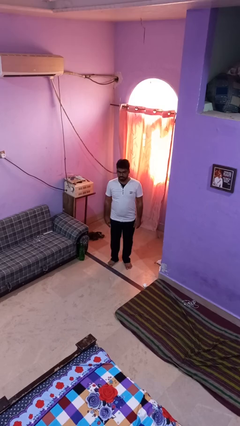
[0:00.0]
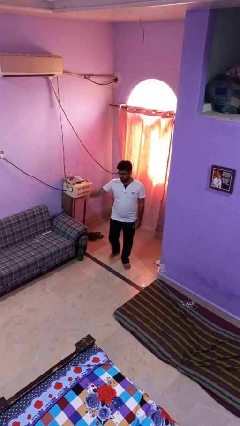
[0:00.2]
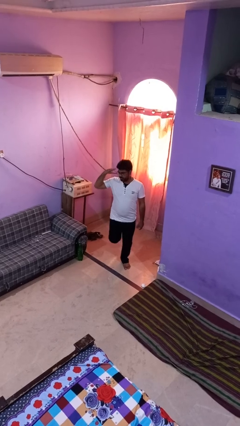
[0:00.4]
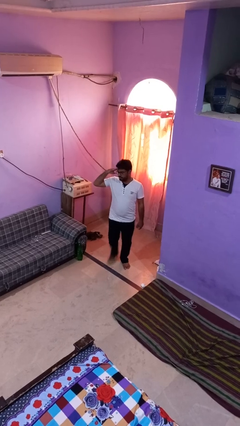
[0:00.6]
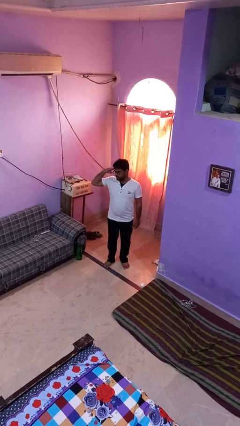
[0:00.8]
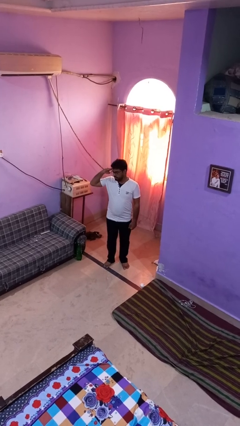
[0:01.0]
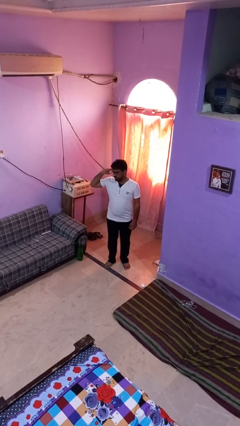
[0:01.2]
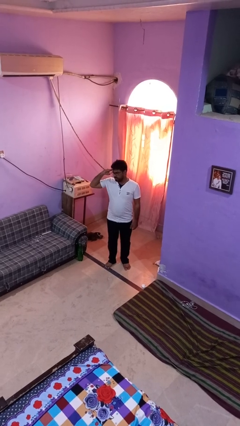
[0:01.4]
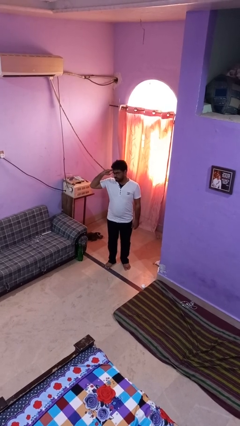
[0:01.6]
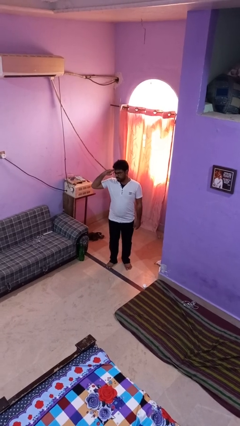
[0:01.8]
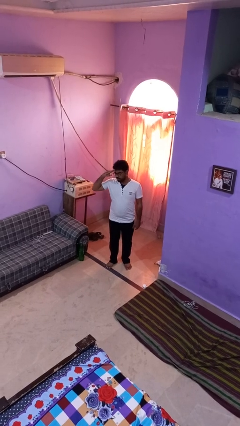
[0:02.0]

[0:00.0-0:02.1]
person salutes

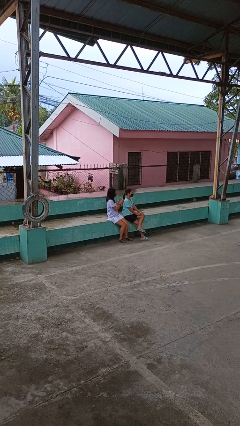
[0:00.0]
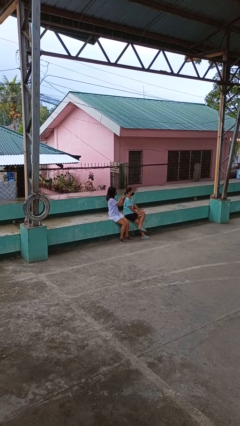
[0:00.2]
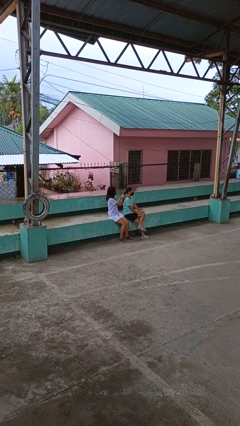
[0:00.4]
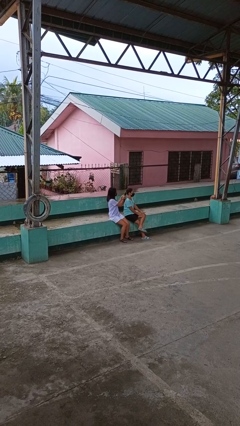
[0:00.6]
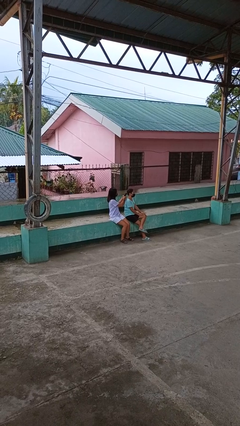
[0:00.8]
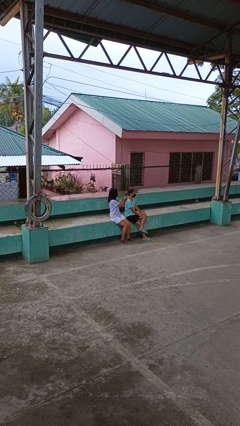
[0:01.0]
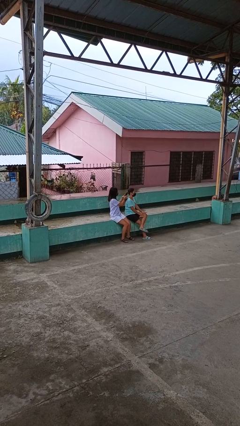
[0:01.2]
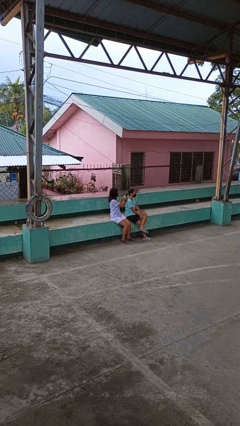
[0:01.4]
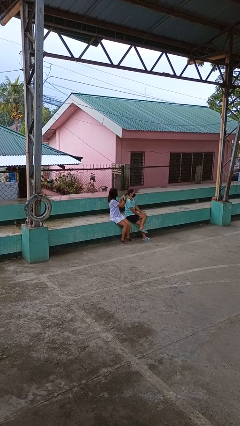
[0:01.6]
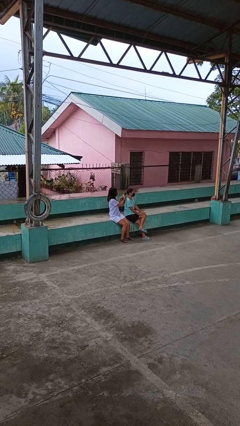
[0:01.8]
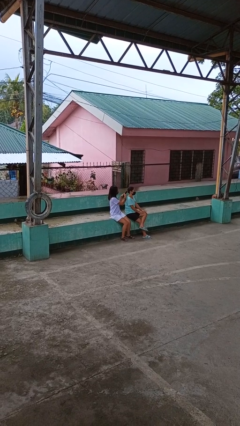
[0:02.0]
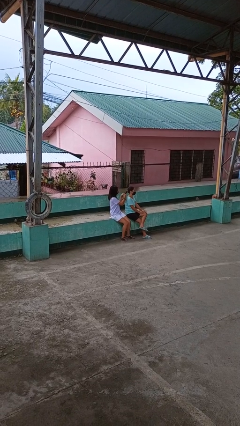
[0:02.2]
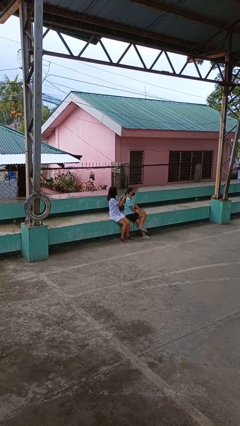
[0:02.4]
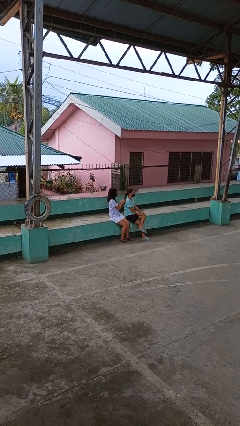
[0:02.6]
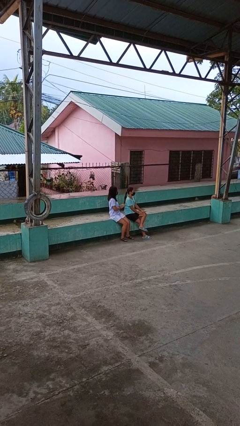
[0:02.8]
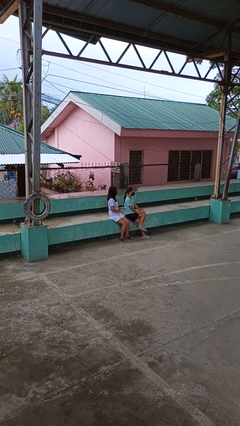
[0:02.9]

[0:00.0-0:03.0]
person braids hair of person

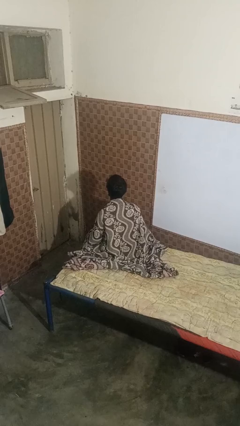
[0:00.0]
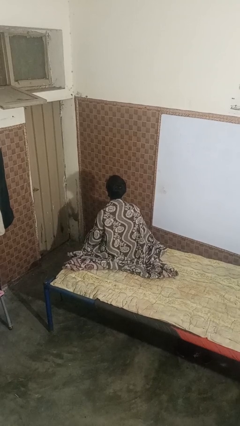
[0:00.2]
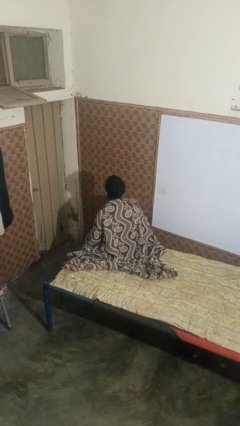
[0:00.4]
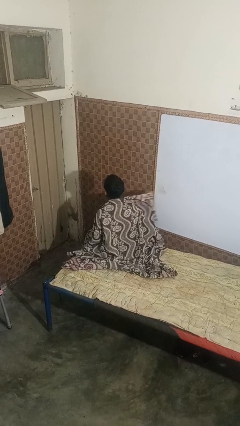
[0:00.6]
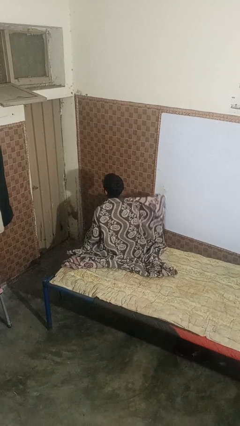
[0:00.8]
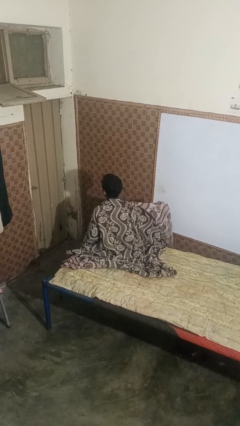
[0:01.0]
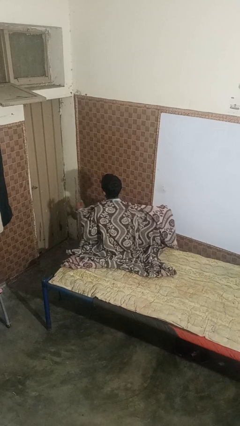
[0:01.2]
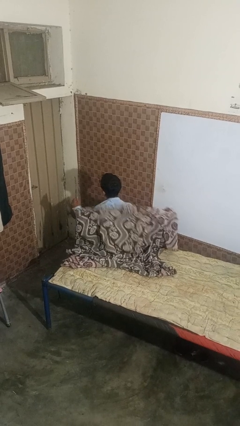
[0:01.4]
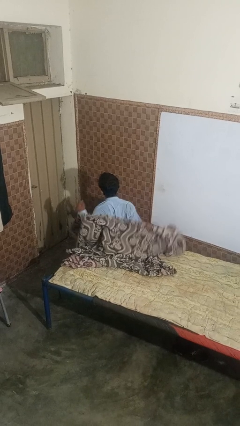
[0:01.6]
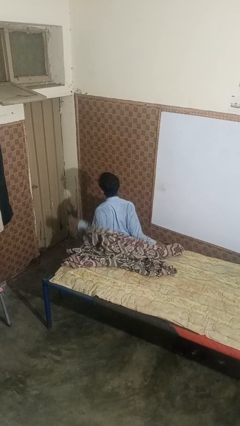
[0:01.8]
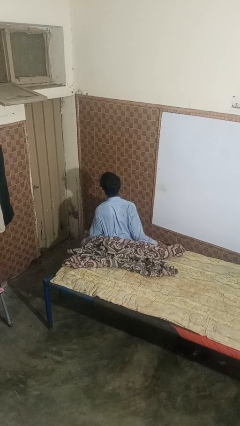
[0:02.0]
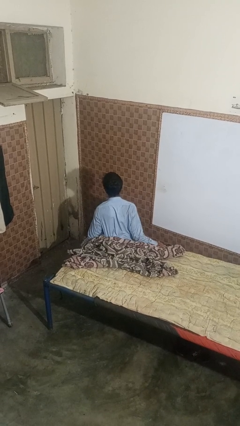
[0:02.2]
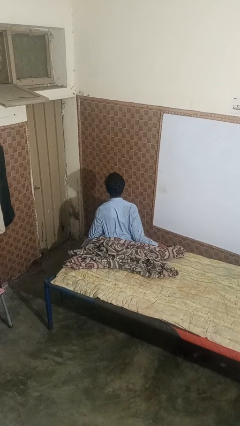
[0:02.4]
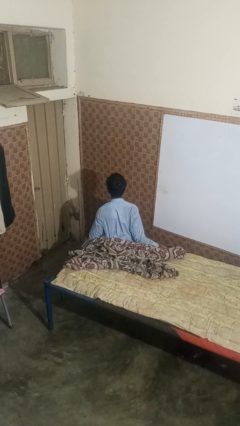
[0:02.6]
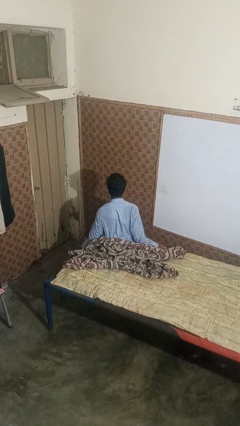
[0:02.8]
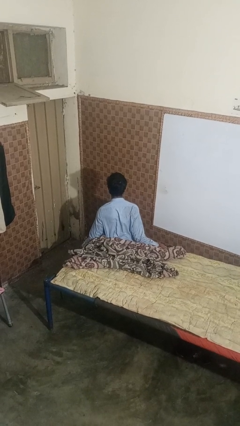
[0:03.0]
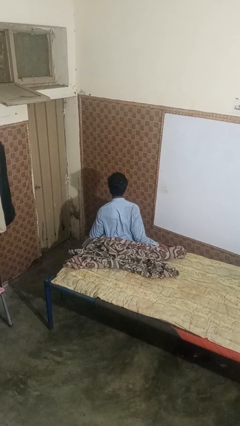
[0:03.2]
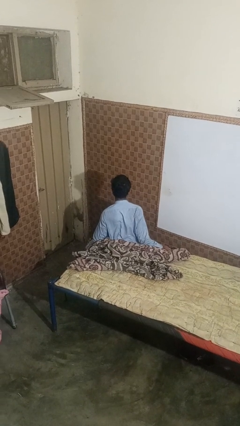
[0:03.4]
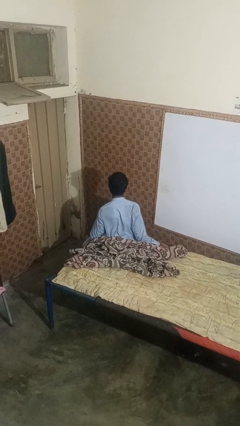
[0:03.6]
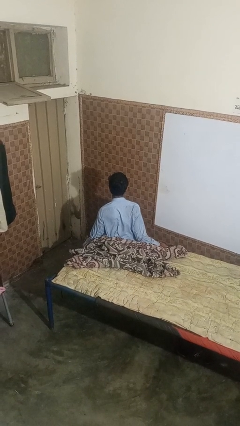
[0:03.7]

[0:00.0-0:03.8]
person uncovers with bedsheets

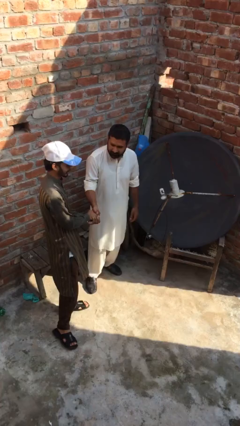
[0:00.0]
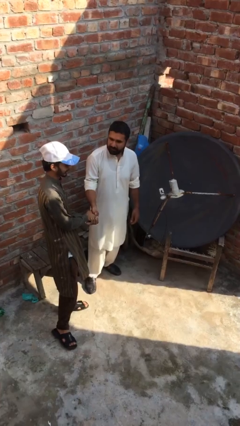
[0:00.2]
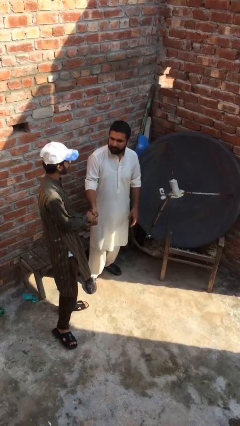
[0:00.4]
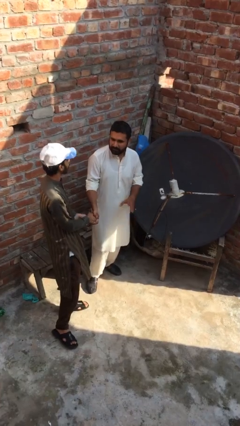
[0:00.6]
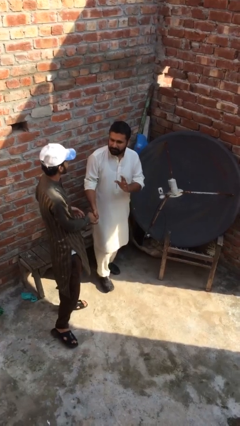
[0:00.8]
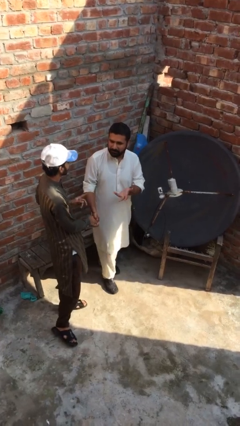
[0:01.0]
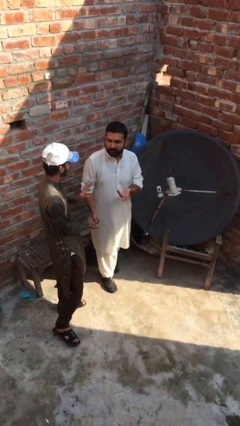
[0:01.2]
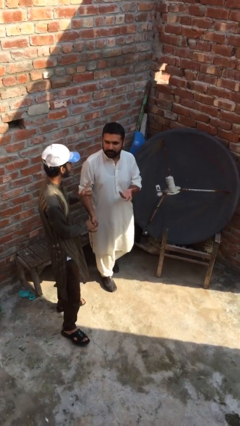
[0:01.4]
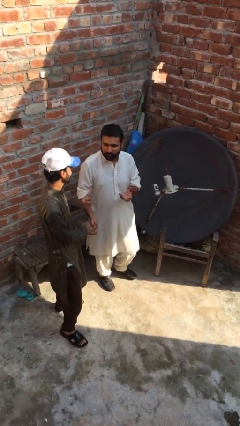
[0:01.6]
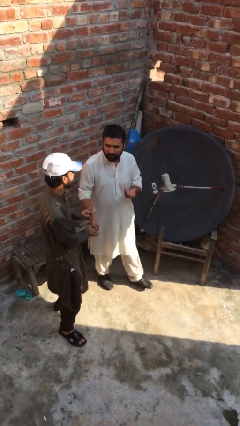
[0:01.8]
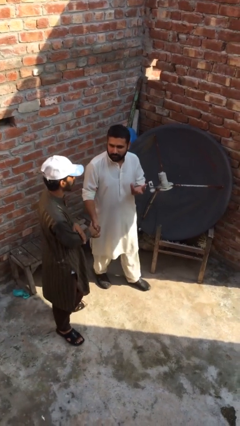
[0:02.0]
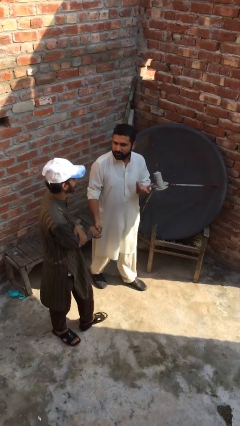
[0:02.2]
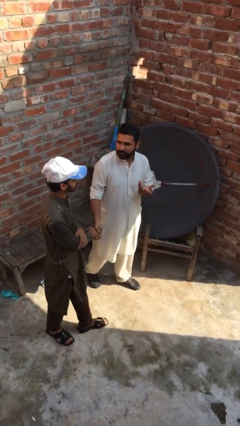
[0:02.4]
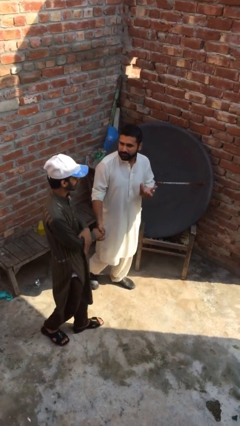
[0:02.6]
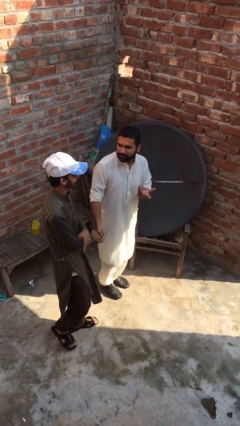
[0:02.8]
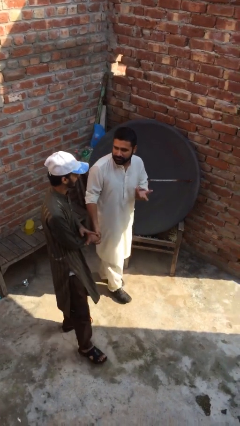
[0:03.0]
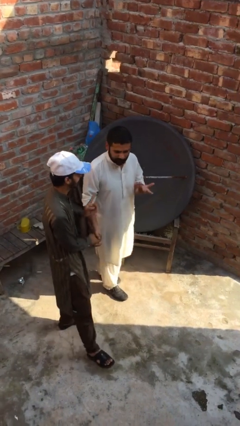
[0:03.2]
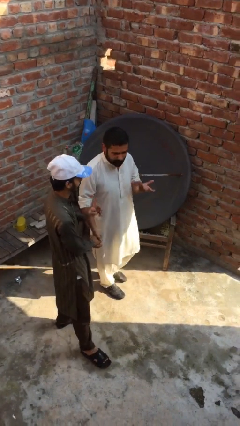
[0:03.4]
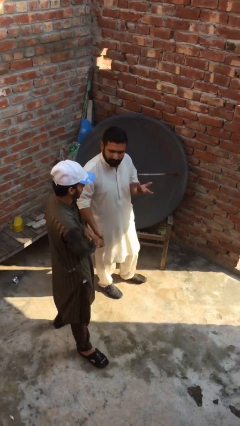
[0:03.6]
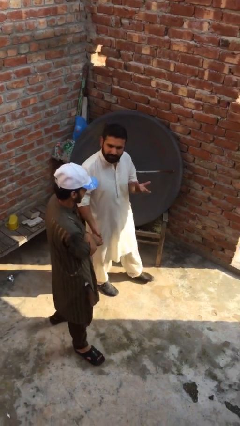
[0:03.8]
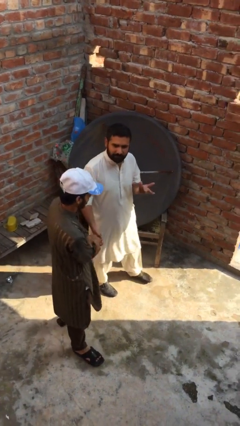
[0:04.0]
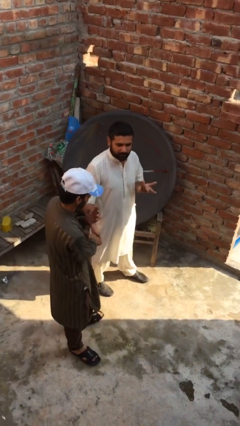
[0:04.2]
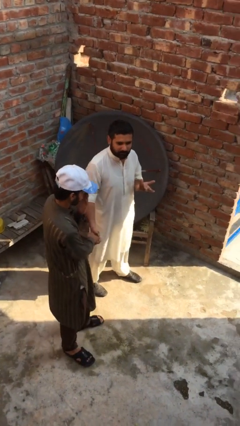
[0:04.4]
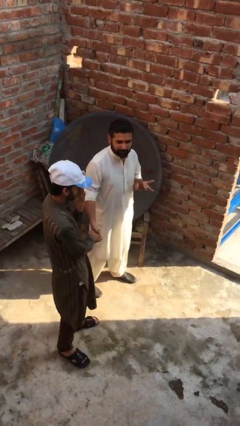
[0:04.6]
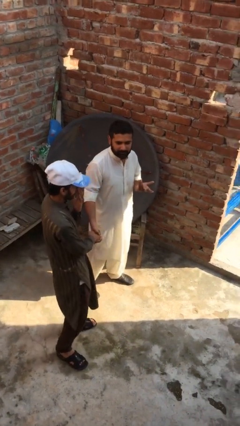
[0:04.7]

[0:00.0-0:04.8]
person talks to person

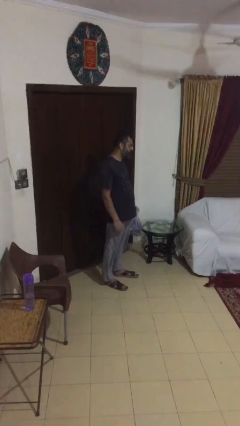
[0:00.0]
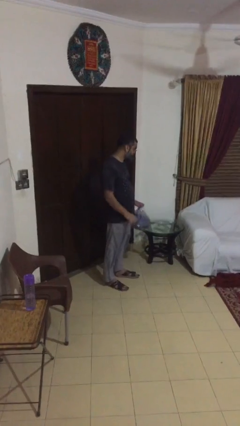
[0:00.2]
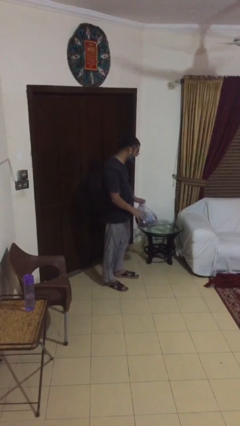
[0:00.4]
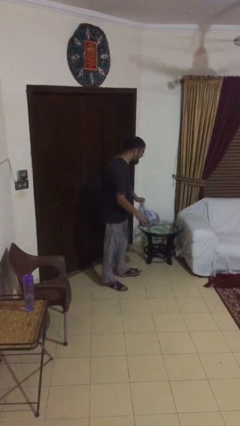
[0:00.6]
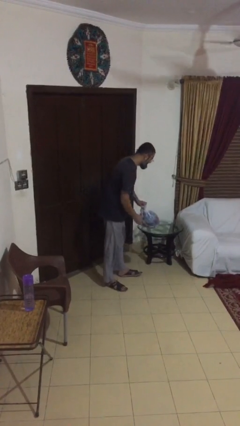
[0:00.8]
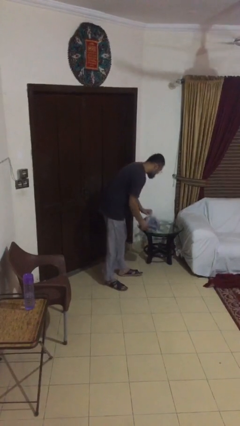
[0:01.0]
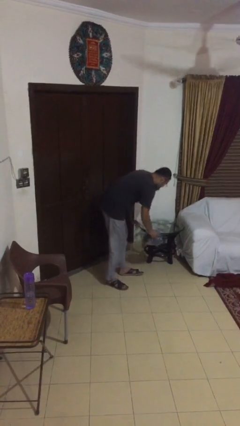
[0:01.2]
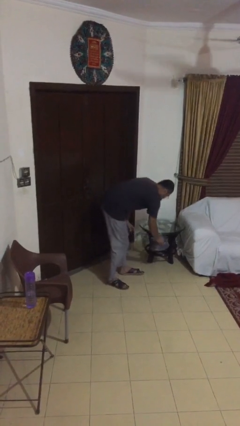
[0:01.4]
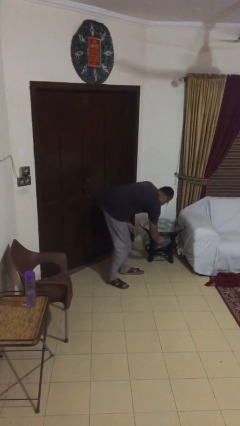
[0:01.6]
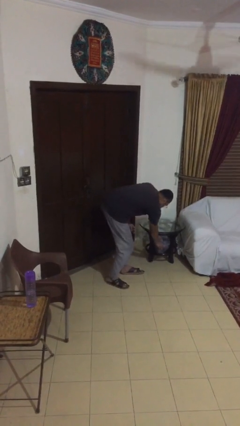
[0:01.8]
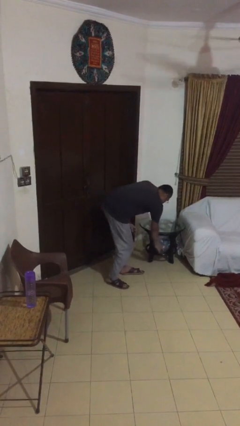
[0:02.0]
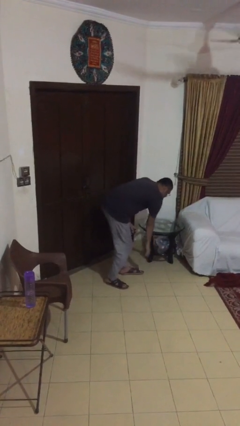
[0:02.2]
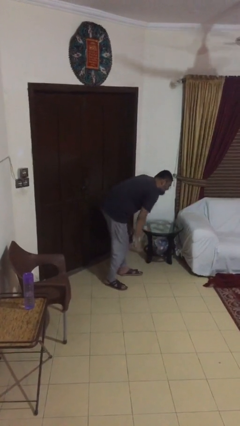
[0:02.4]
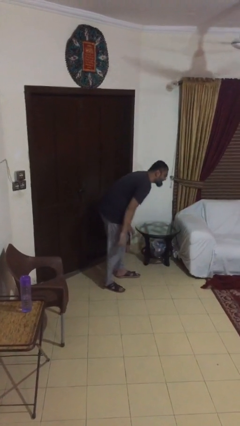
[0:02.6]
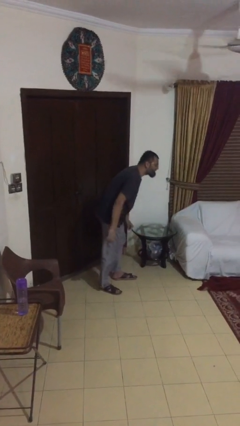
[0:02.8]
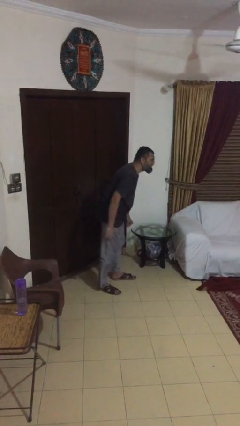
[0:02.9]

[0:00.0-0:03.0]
person puts down object on table

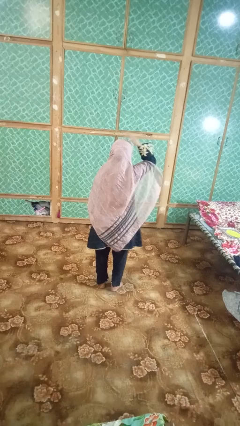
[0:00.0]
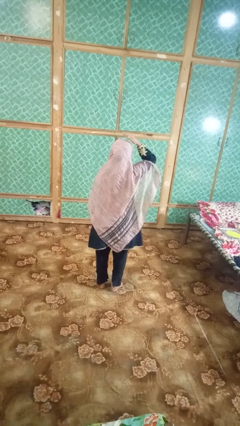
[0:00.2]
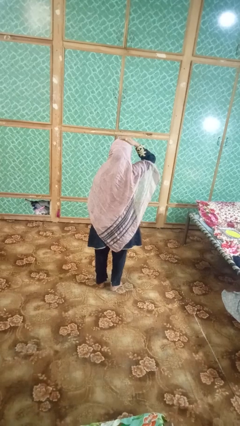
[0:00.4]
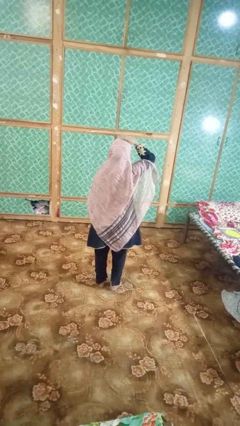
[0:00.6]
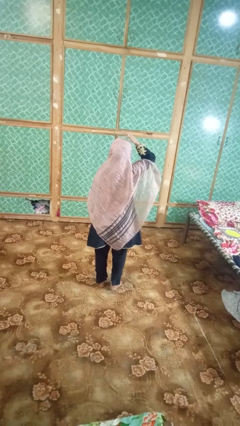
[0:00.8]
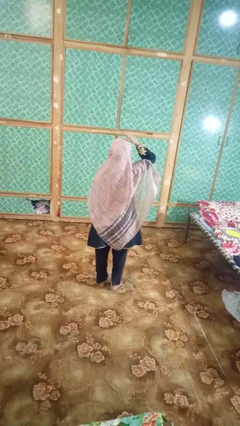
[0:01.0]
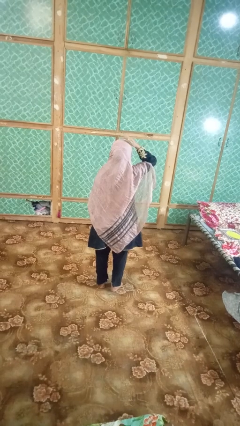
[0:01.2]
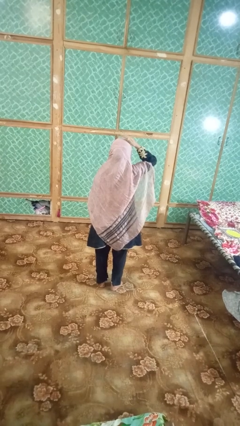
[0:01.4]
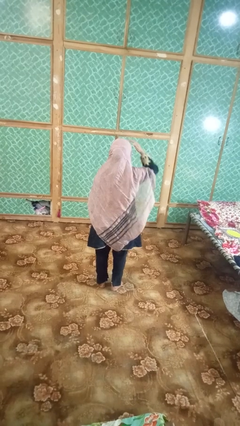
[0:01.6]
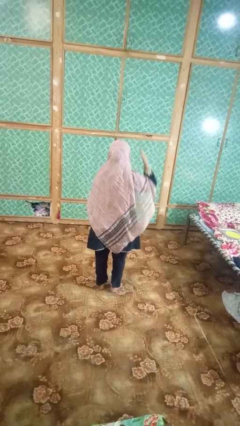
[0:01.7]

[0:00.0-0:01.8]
person pats head
